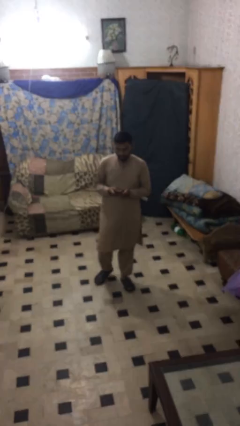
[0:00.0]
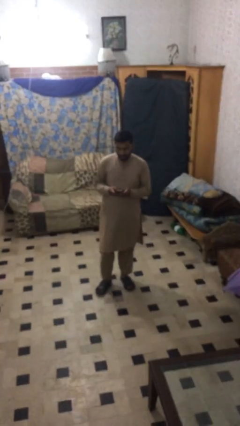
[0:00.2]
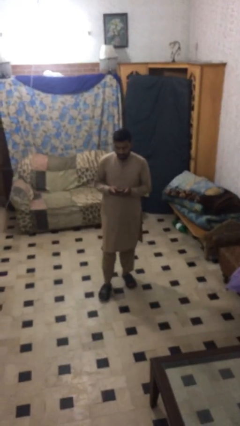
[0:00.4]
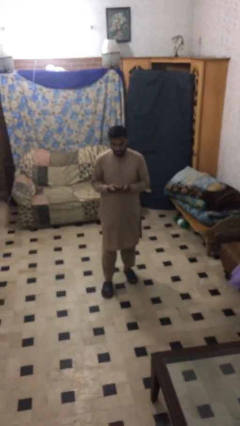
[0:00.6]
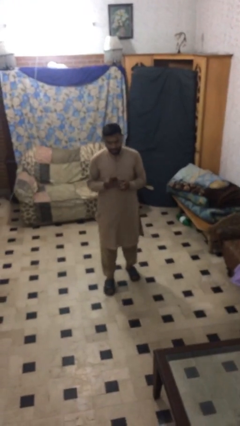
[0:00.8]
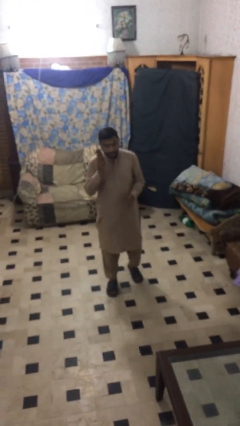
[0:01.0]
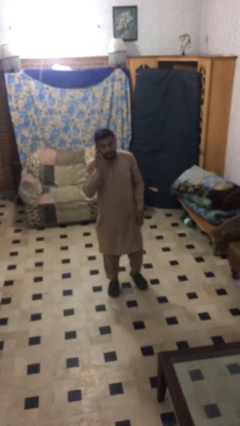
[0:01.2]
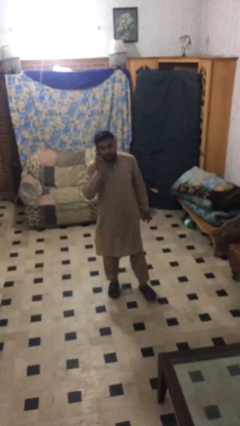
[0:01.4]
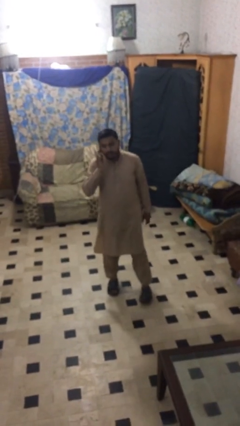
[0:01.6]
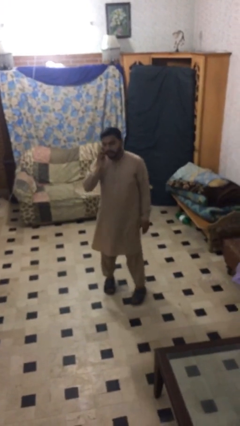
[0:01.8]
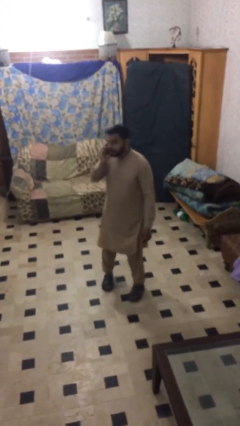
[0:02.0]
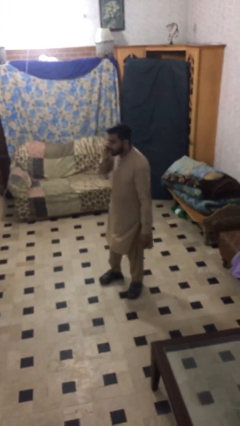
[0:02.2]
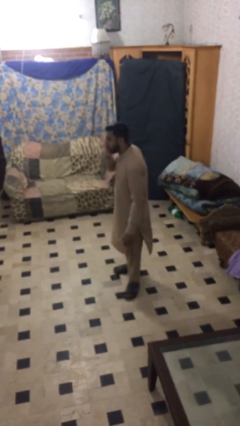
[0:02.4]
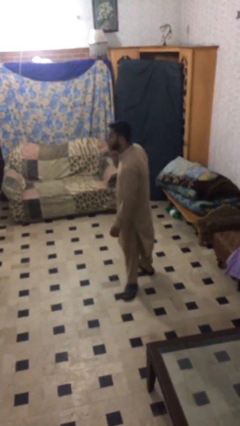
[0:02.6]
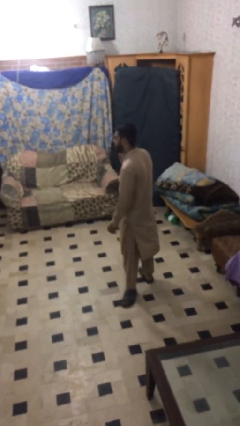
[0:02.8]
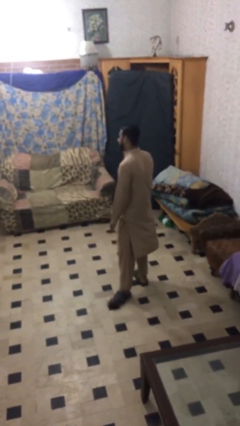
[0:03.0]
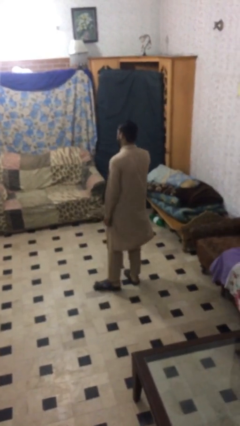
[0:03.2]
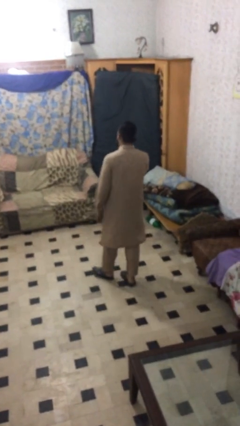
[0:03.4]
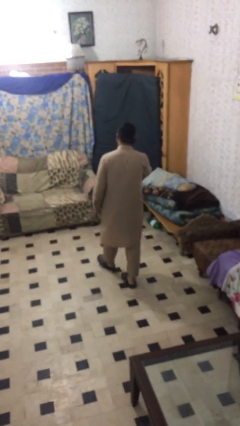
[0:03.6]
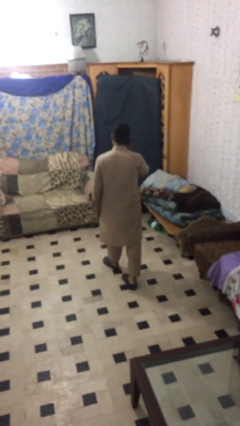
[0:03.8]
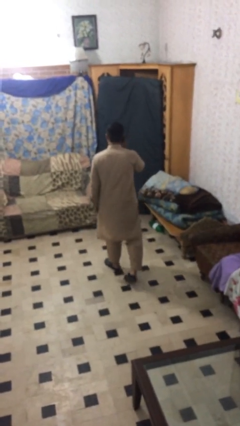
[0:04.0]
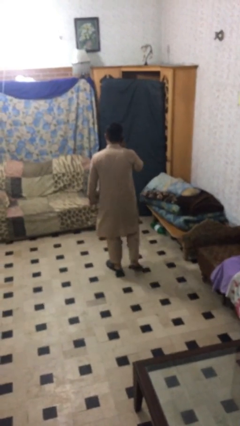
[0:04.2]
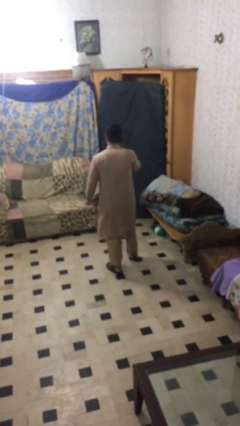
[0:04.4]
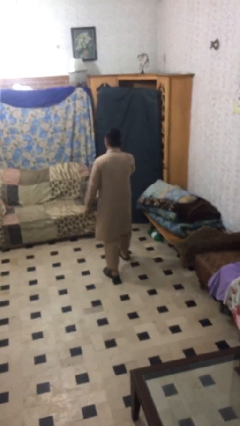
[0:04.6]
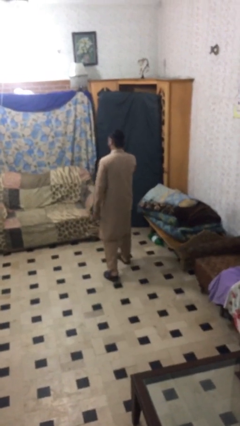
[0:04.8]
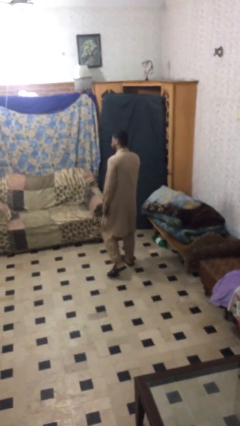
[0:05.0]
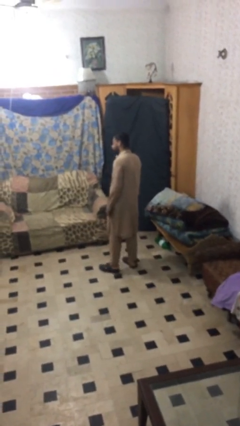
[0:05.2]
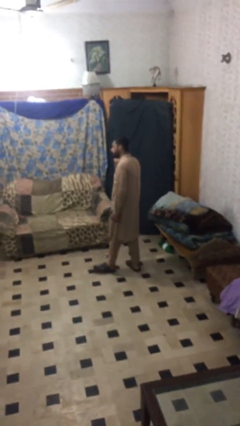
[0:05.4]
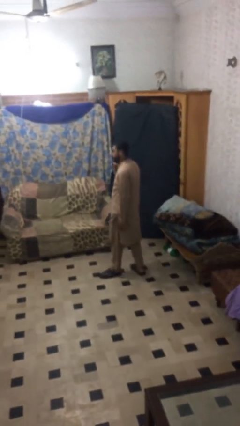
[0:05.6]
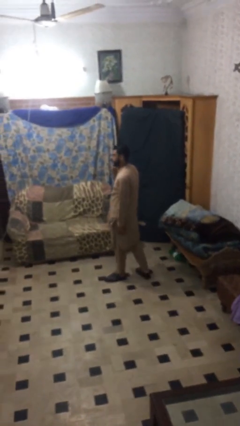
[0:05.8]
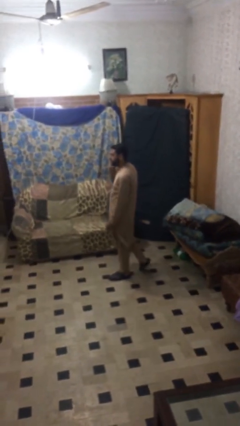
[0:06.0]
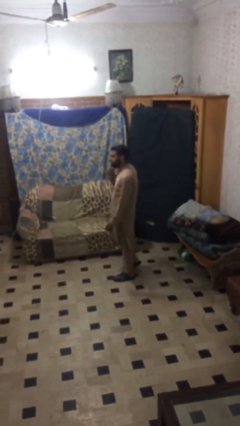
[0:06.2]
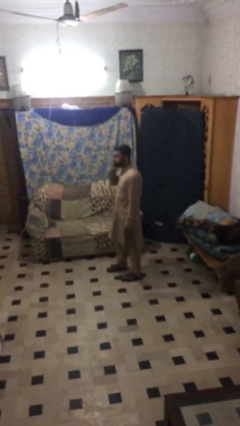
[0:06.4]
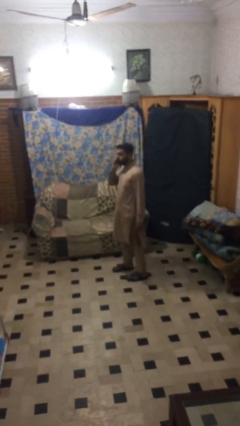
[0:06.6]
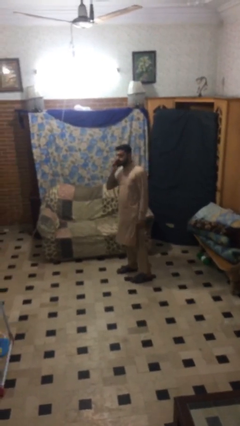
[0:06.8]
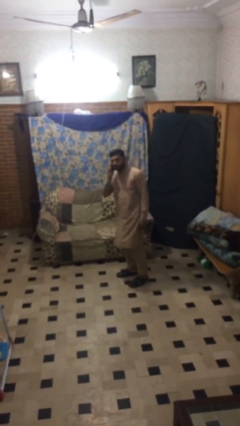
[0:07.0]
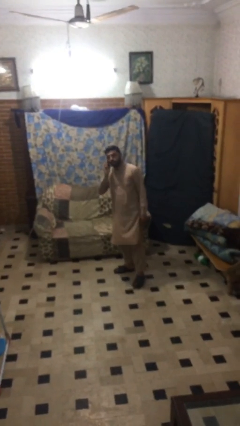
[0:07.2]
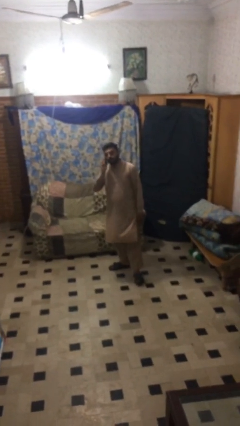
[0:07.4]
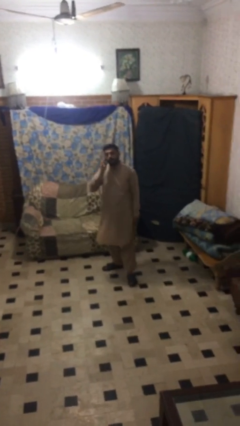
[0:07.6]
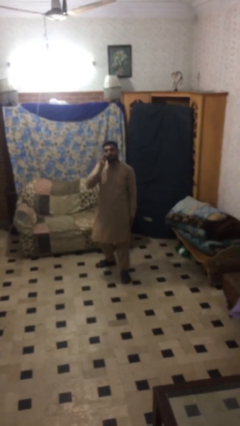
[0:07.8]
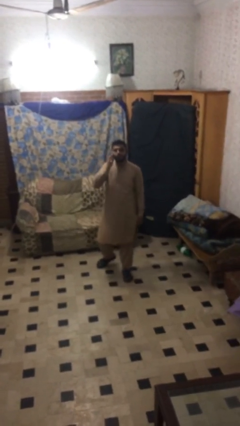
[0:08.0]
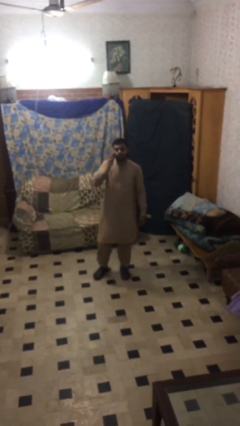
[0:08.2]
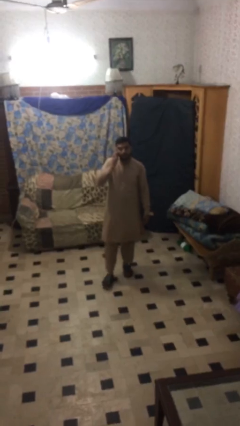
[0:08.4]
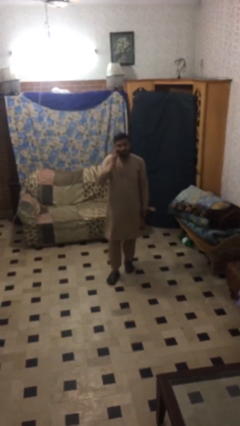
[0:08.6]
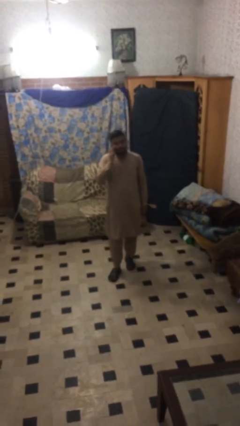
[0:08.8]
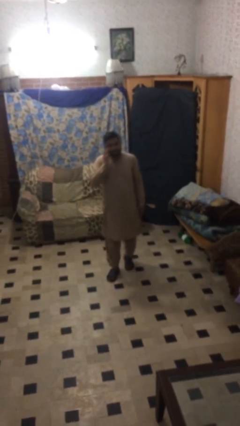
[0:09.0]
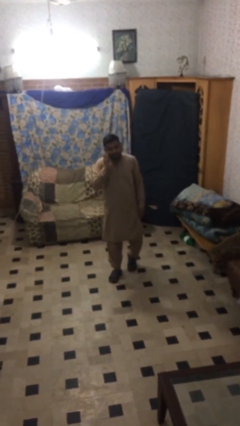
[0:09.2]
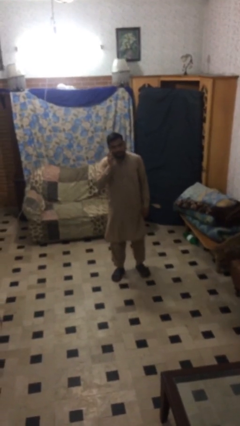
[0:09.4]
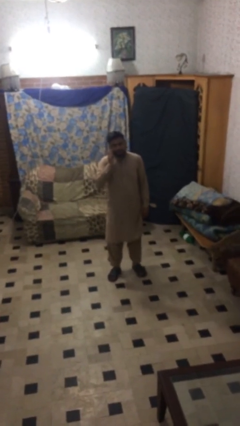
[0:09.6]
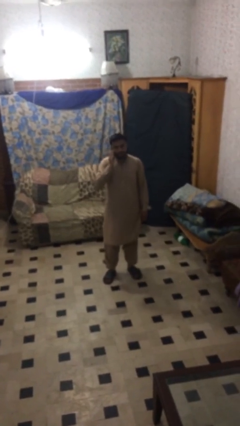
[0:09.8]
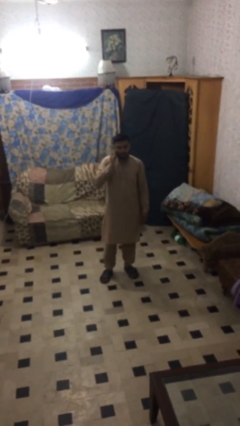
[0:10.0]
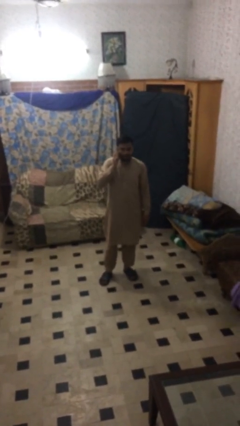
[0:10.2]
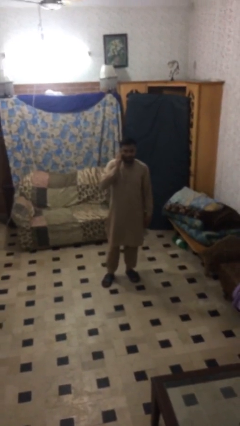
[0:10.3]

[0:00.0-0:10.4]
person talks on phone

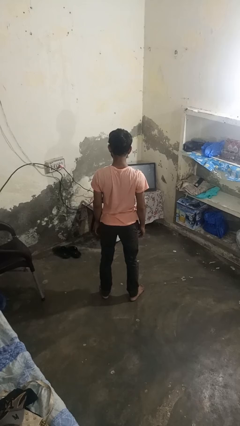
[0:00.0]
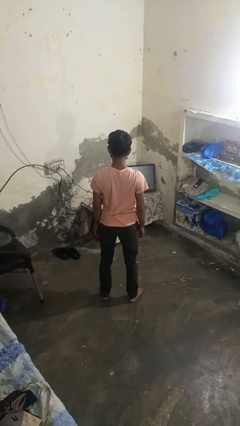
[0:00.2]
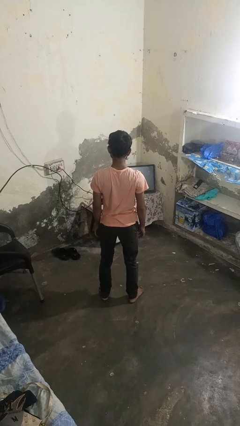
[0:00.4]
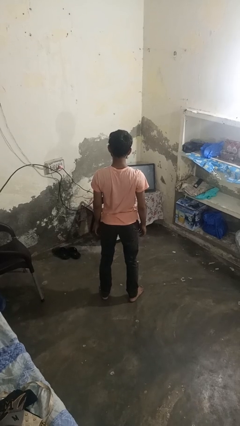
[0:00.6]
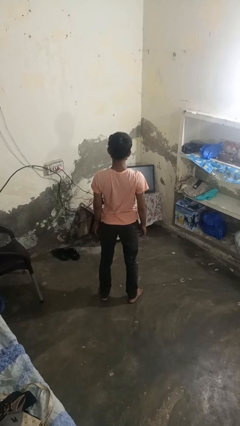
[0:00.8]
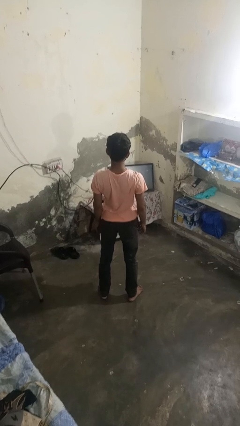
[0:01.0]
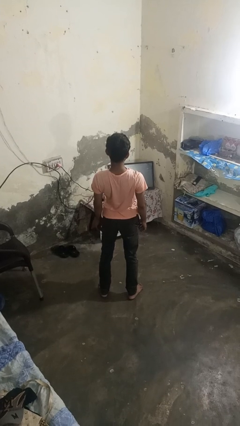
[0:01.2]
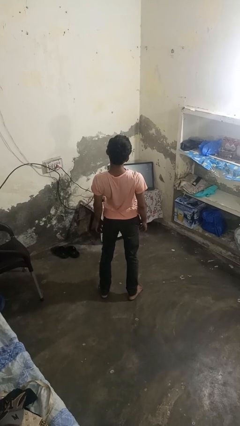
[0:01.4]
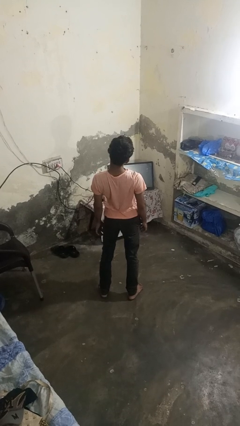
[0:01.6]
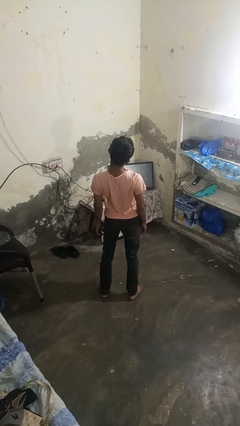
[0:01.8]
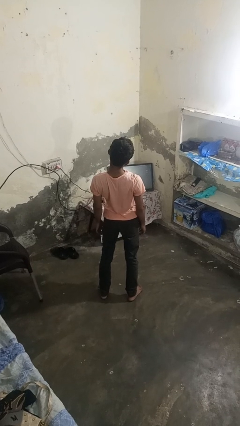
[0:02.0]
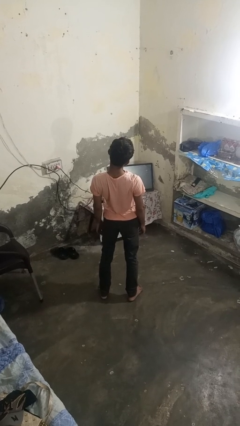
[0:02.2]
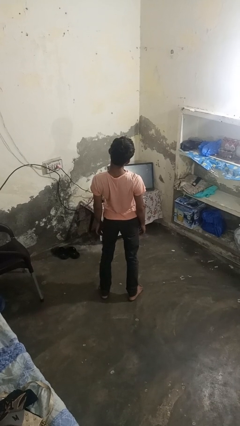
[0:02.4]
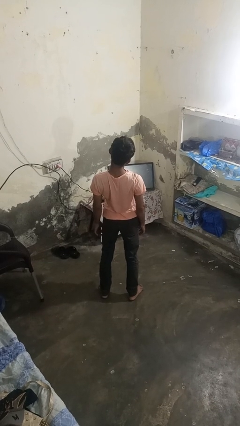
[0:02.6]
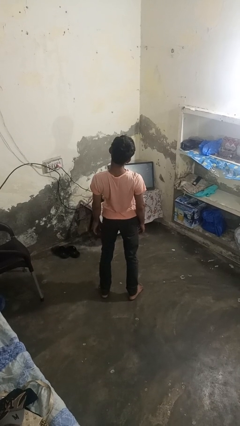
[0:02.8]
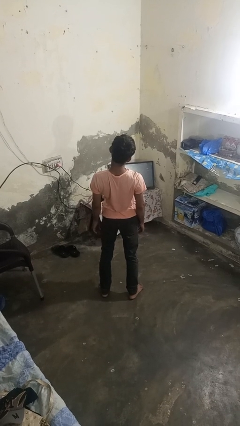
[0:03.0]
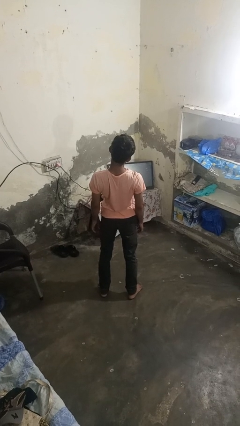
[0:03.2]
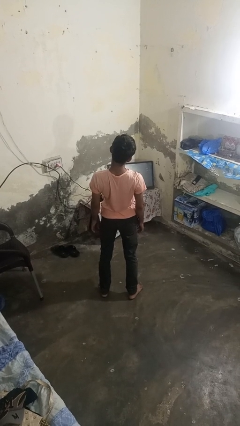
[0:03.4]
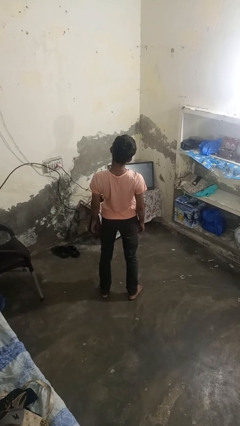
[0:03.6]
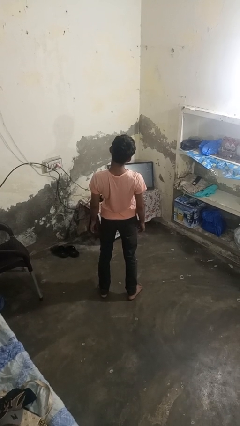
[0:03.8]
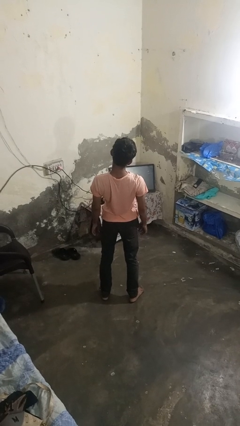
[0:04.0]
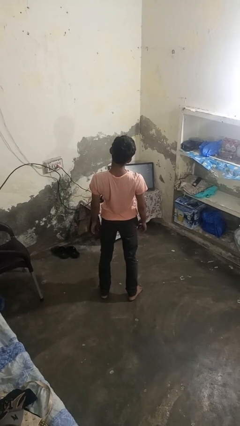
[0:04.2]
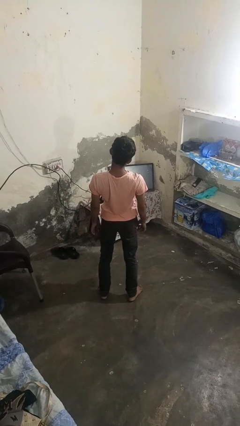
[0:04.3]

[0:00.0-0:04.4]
person stretches back

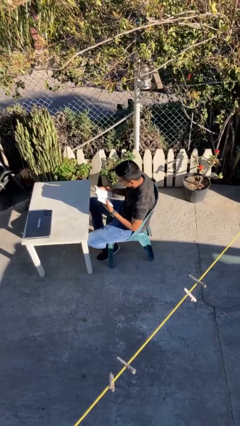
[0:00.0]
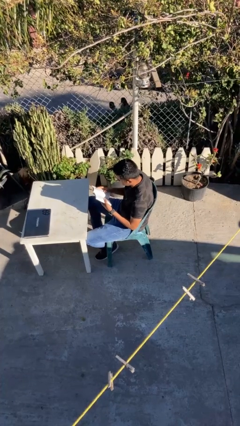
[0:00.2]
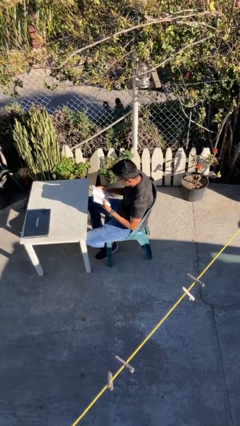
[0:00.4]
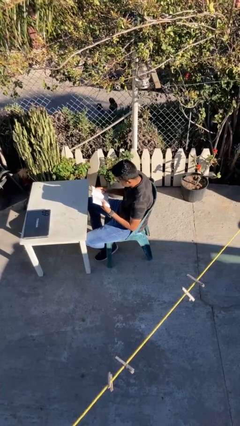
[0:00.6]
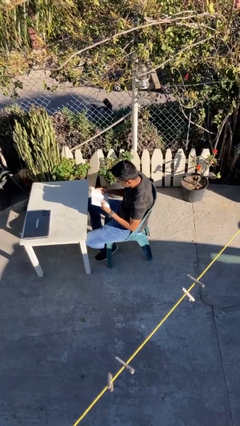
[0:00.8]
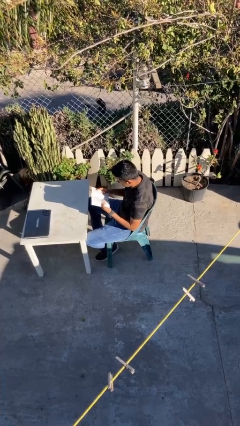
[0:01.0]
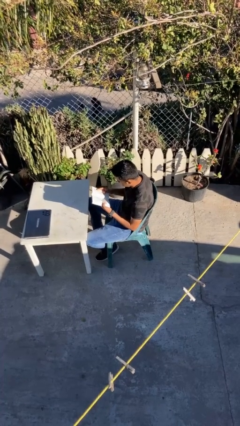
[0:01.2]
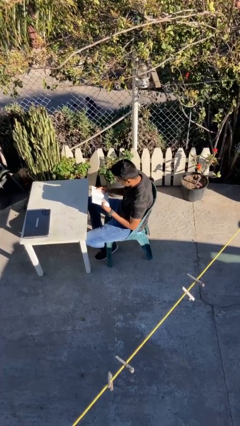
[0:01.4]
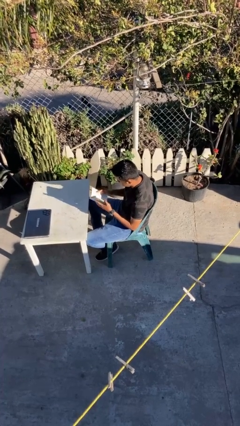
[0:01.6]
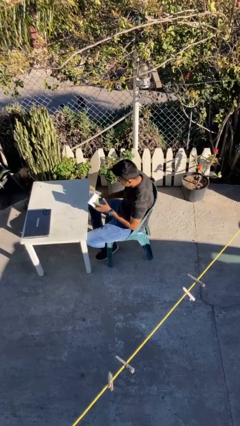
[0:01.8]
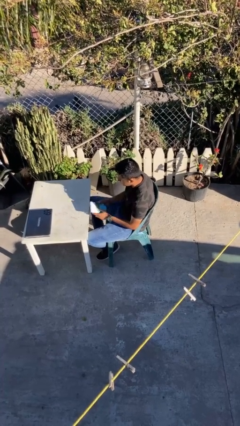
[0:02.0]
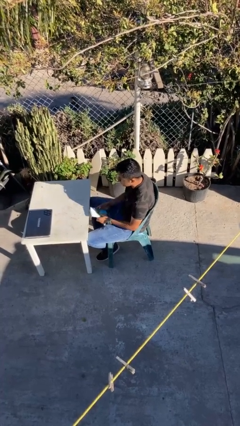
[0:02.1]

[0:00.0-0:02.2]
person reads document

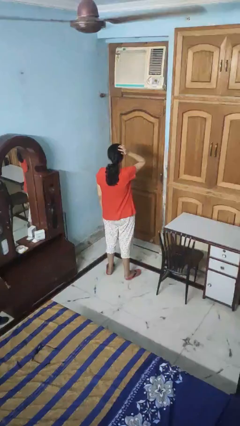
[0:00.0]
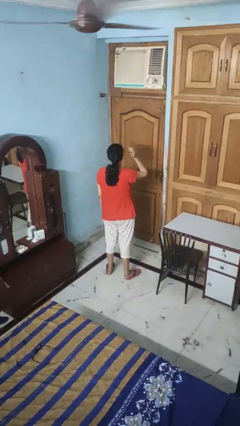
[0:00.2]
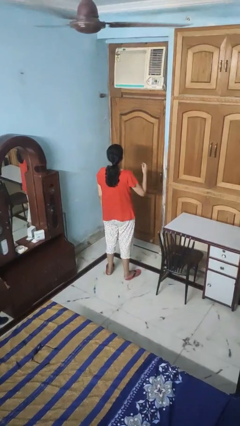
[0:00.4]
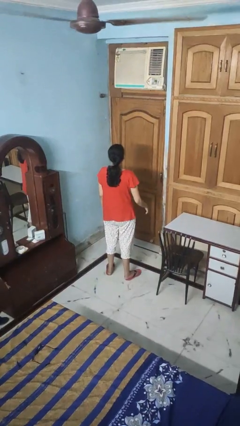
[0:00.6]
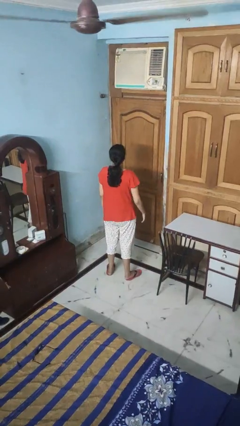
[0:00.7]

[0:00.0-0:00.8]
person pats head
